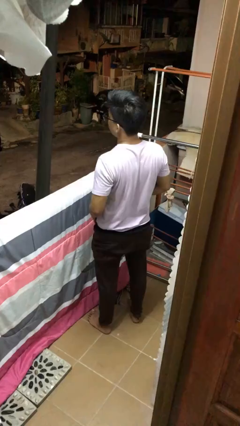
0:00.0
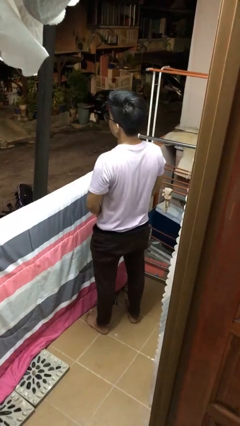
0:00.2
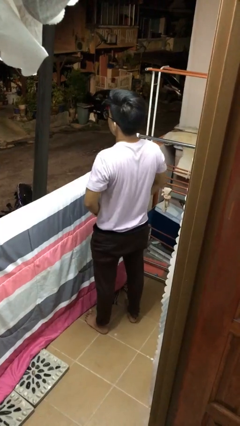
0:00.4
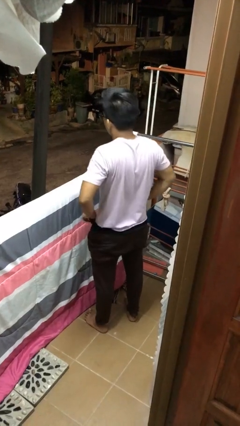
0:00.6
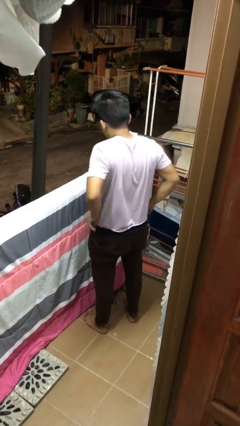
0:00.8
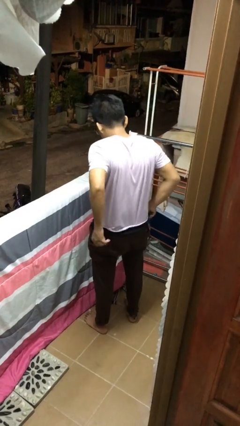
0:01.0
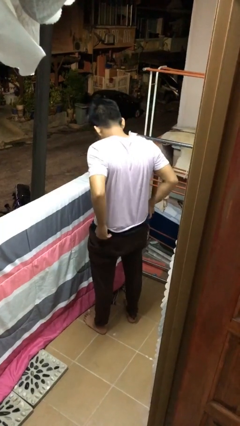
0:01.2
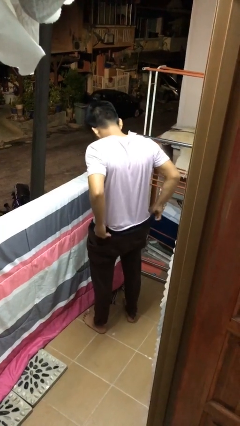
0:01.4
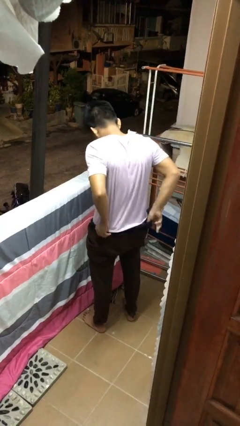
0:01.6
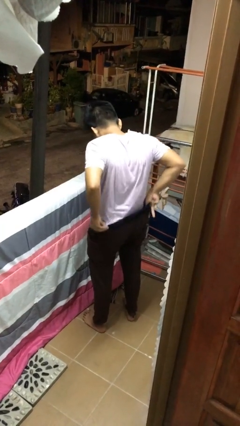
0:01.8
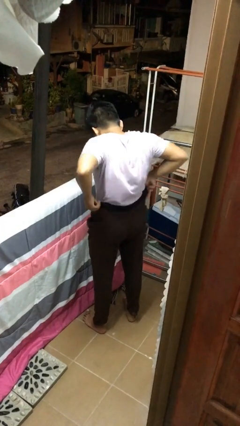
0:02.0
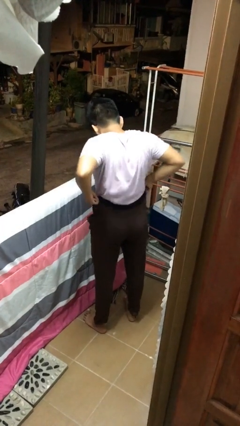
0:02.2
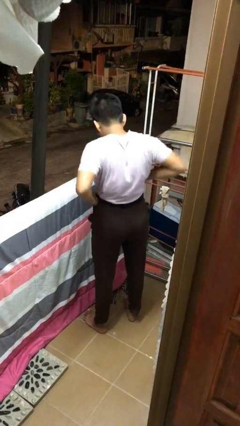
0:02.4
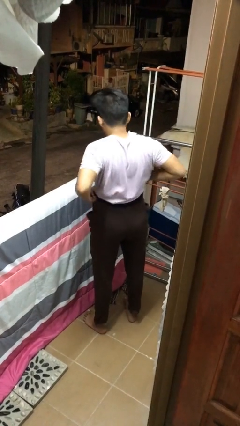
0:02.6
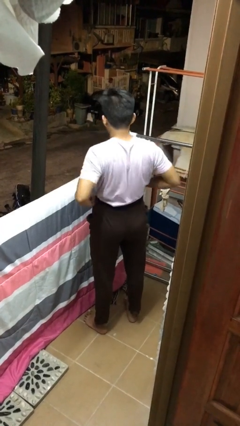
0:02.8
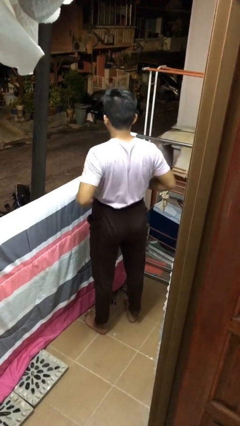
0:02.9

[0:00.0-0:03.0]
person hikes up pants

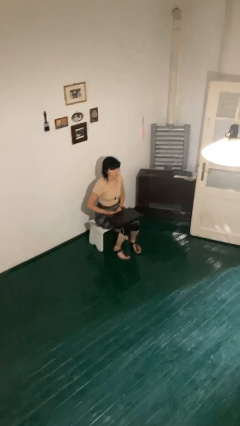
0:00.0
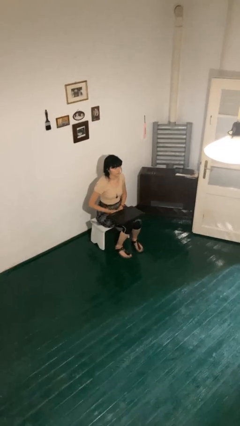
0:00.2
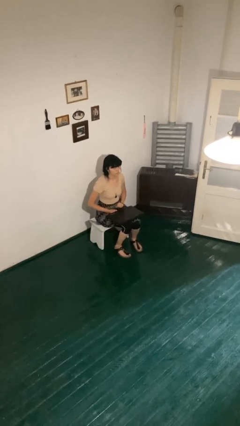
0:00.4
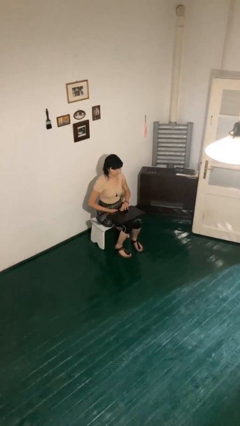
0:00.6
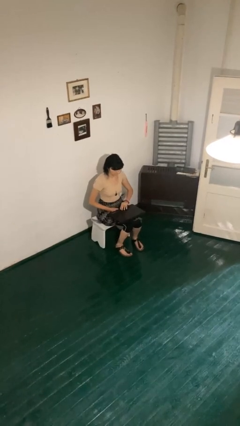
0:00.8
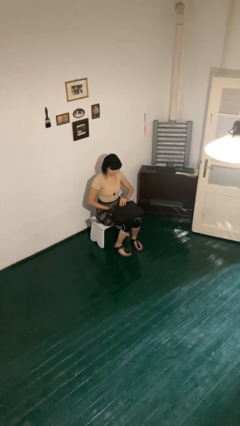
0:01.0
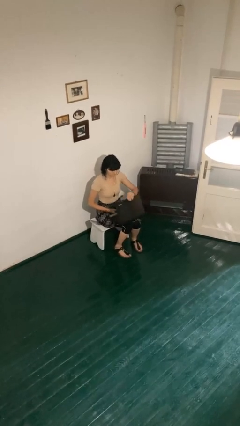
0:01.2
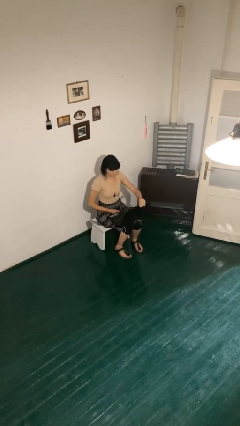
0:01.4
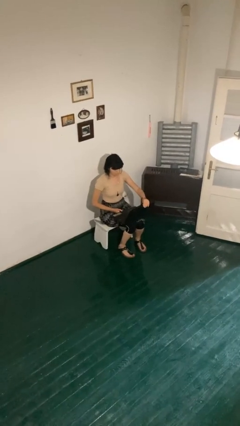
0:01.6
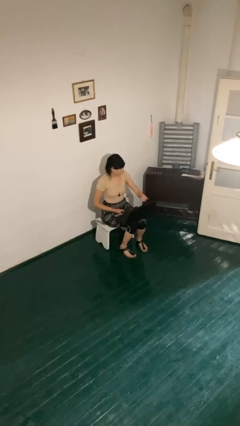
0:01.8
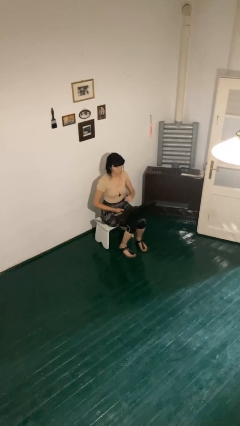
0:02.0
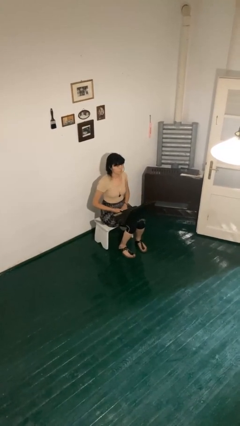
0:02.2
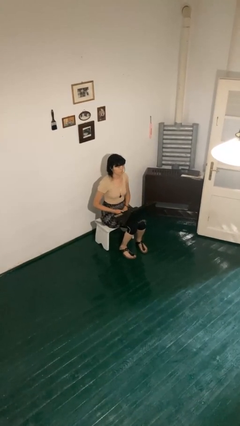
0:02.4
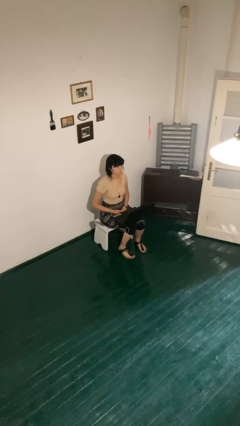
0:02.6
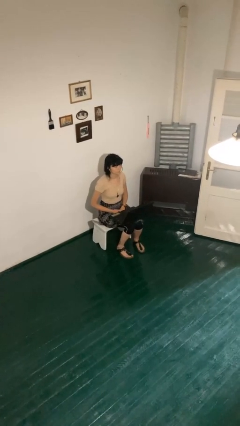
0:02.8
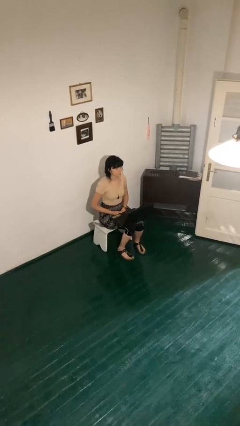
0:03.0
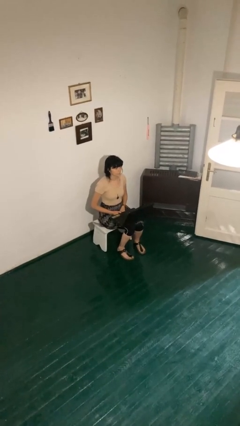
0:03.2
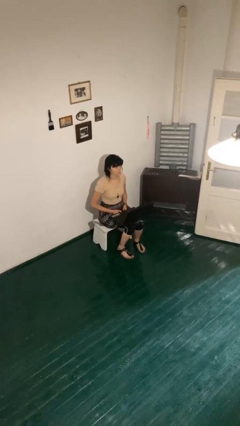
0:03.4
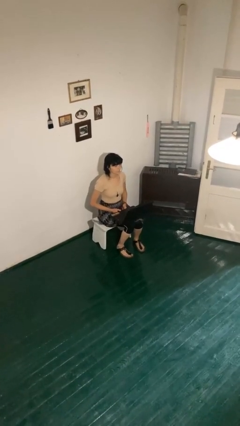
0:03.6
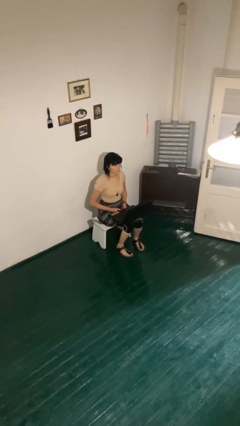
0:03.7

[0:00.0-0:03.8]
person opens laptop

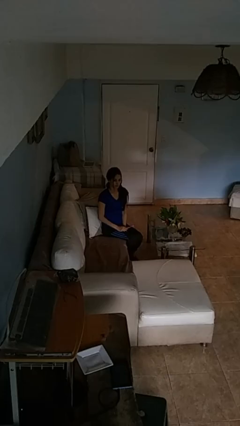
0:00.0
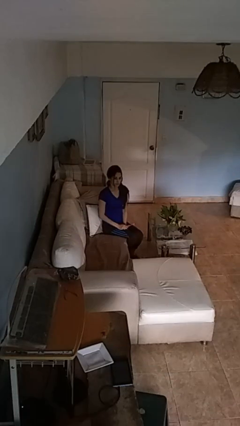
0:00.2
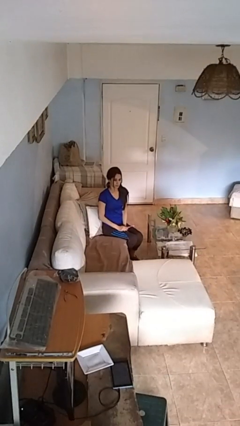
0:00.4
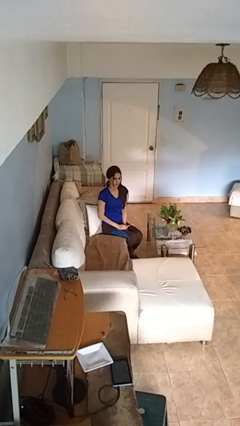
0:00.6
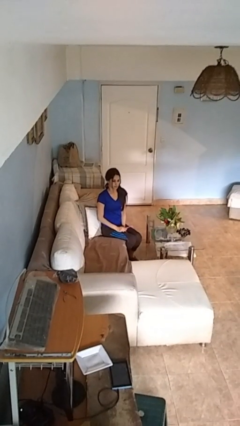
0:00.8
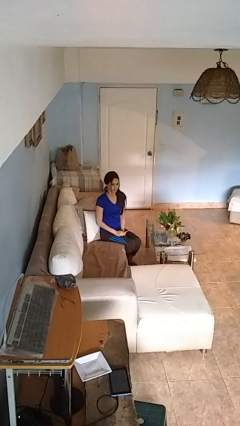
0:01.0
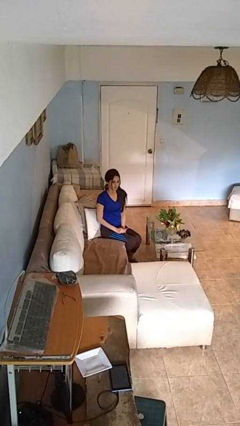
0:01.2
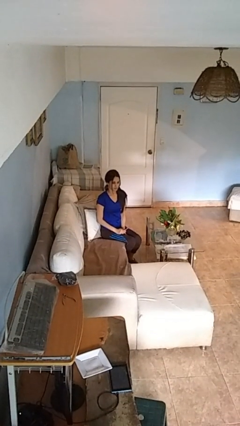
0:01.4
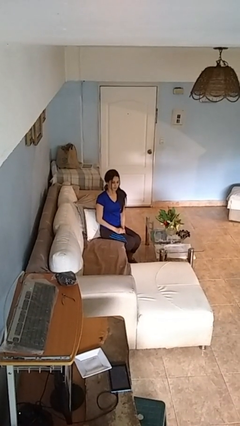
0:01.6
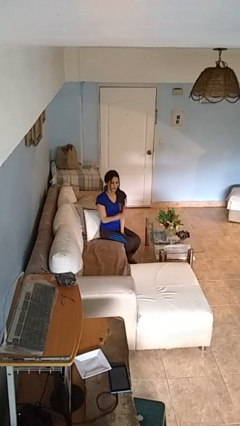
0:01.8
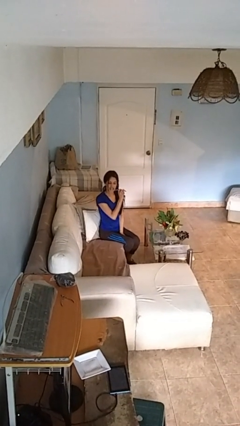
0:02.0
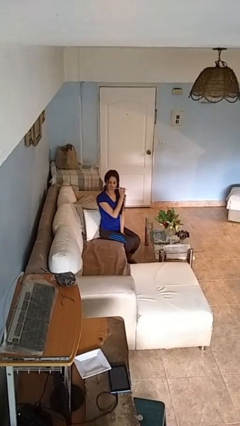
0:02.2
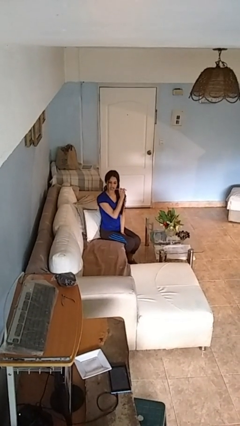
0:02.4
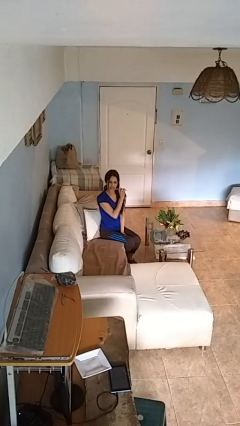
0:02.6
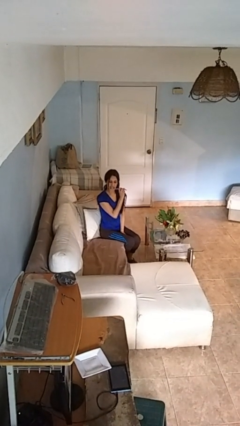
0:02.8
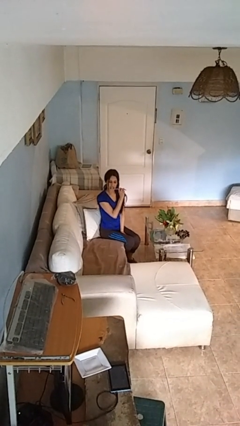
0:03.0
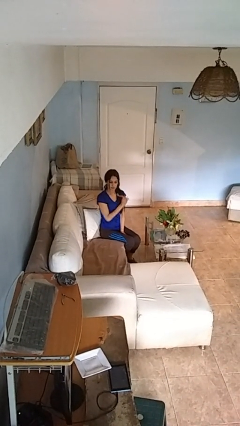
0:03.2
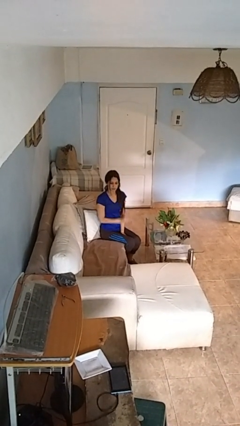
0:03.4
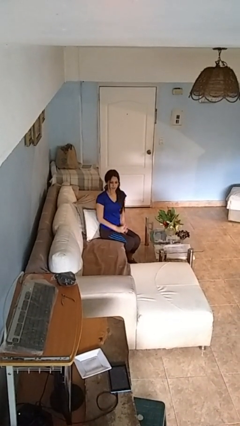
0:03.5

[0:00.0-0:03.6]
person brushes teeth

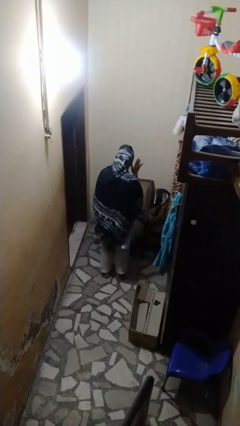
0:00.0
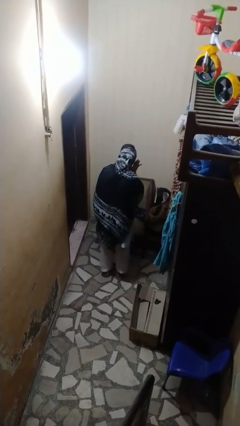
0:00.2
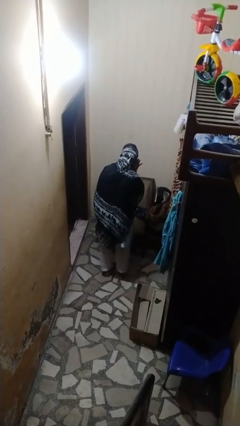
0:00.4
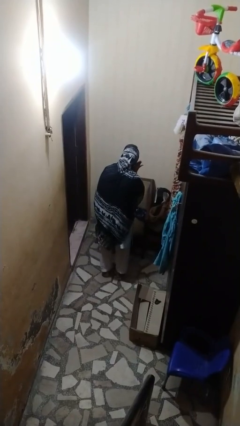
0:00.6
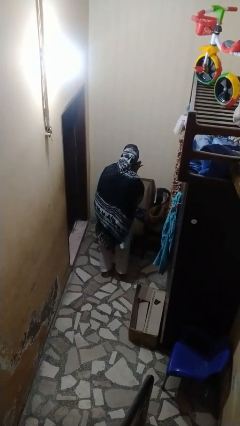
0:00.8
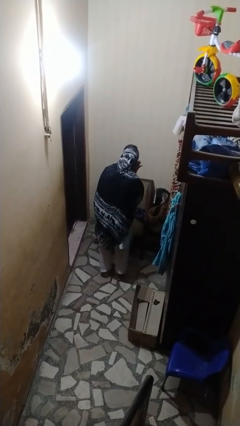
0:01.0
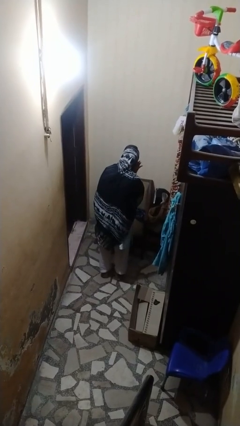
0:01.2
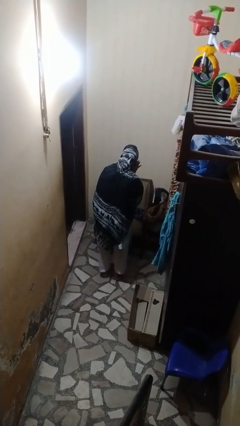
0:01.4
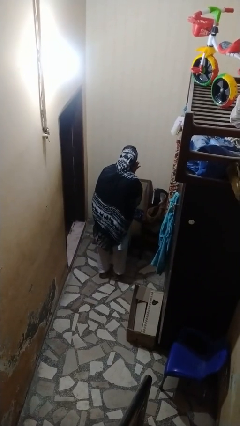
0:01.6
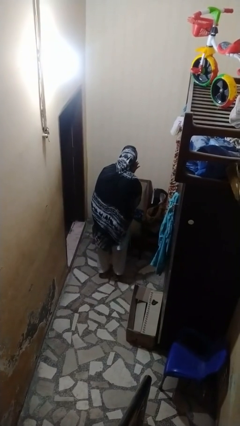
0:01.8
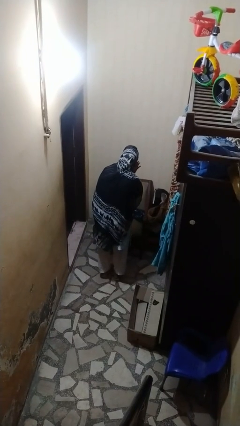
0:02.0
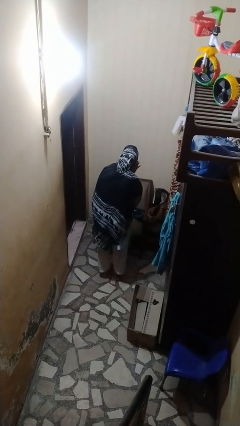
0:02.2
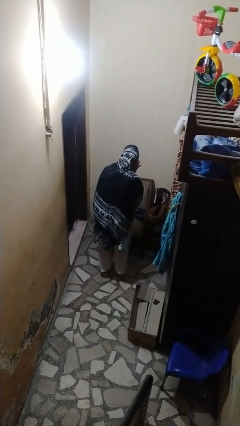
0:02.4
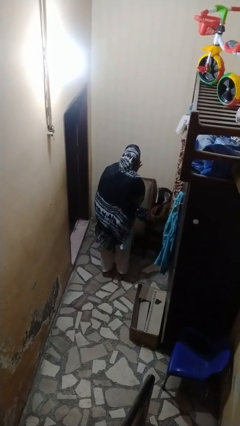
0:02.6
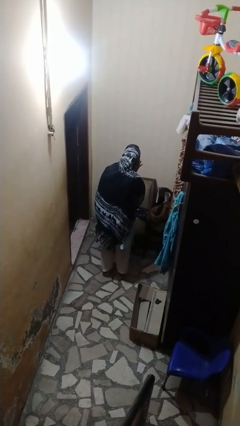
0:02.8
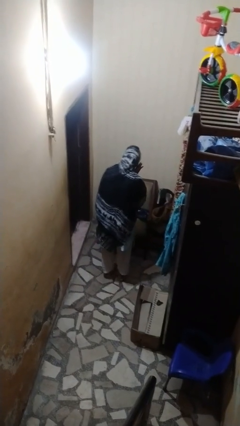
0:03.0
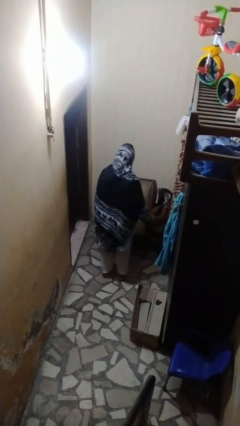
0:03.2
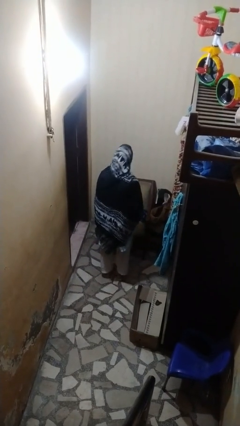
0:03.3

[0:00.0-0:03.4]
person gestures listen closely

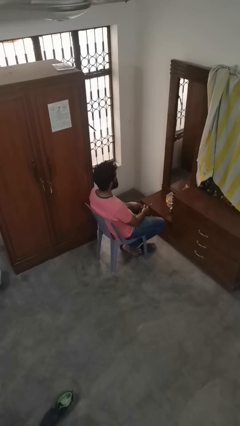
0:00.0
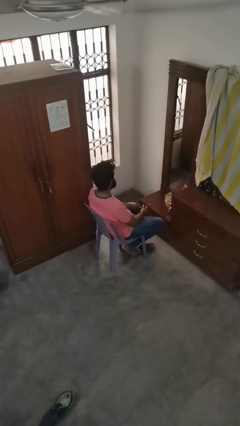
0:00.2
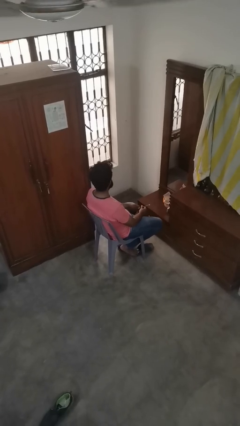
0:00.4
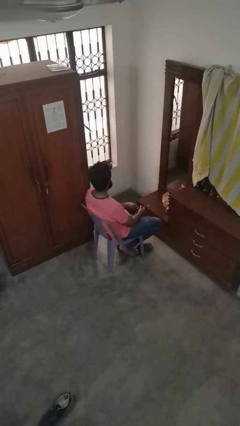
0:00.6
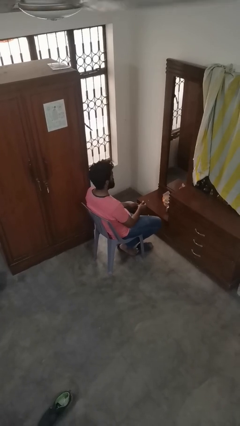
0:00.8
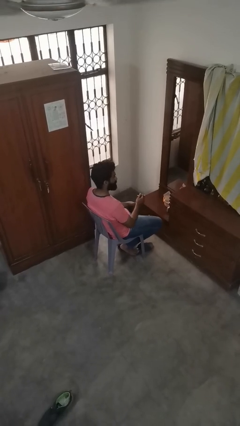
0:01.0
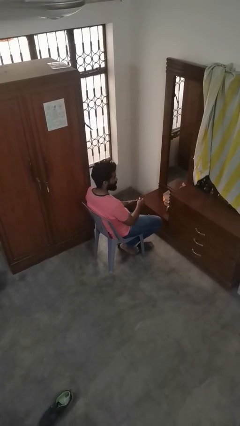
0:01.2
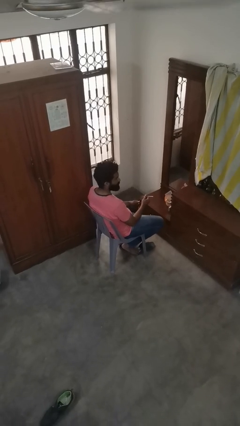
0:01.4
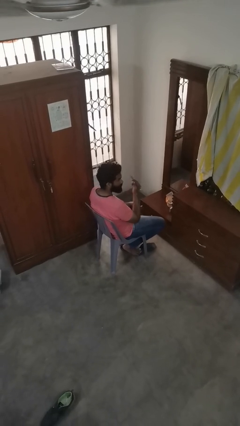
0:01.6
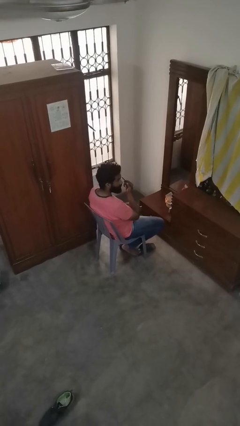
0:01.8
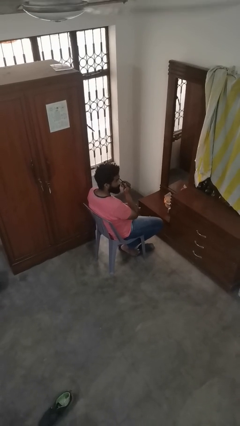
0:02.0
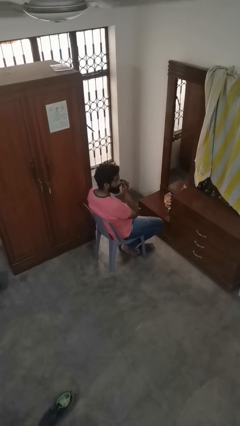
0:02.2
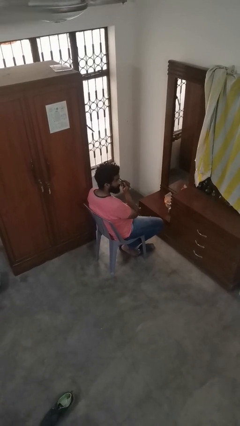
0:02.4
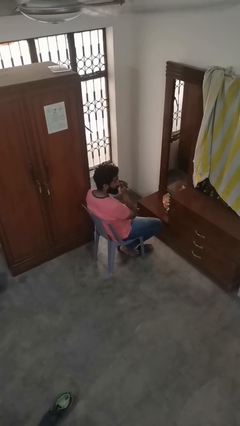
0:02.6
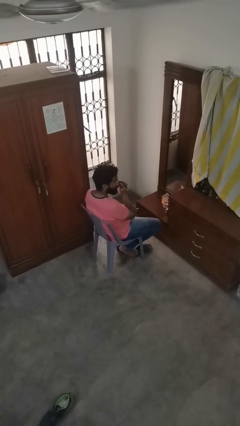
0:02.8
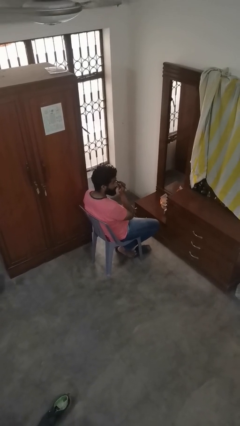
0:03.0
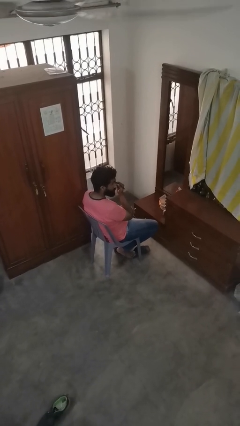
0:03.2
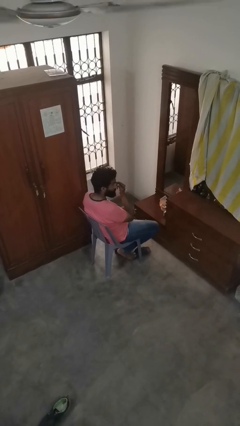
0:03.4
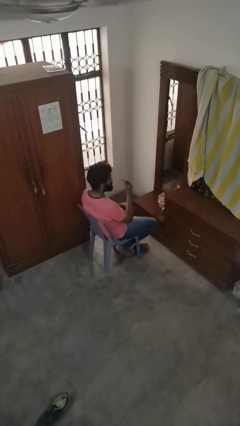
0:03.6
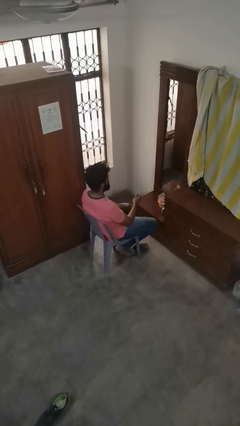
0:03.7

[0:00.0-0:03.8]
person applies eye makeup

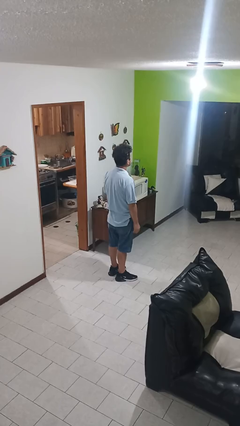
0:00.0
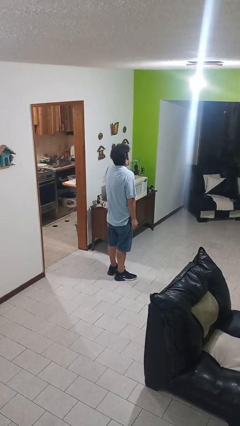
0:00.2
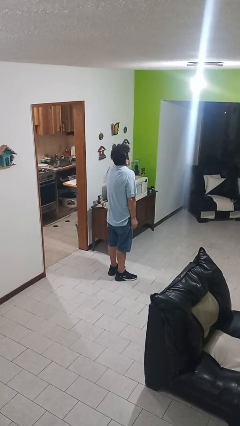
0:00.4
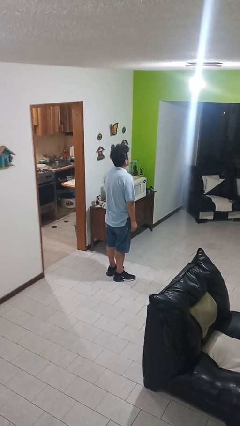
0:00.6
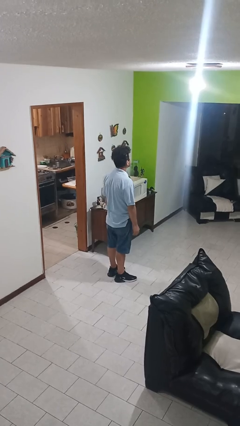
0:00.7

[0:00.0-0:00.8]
person shrugs
